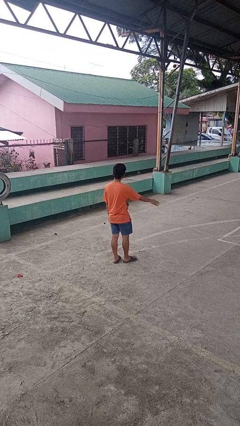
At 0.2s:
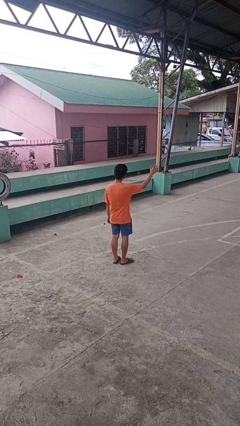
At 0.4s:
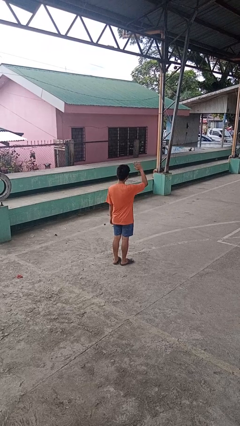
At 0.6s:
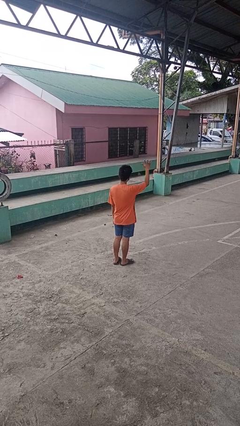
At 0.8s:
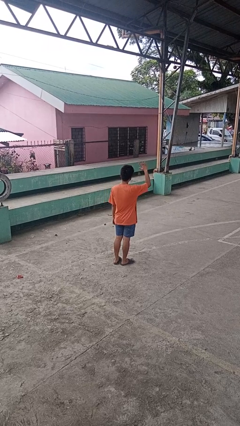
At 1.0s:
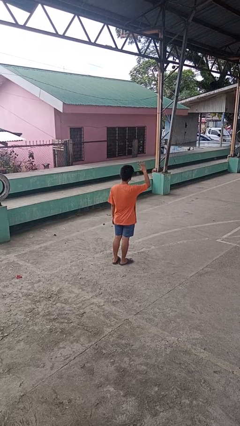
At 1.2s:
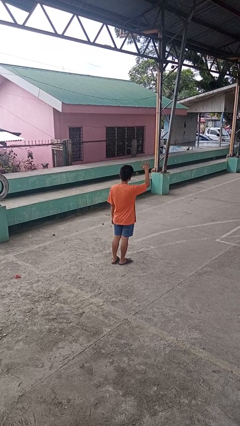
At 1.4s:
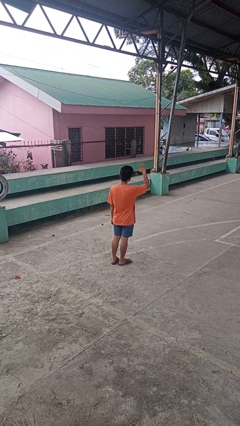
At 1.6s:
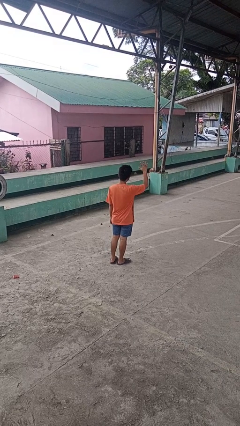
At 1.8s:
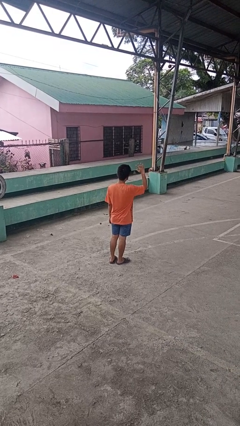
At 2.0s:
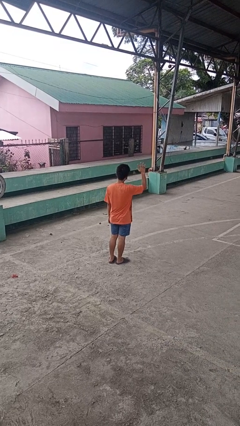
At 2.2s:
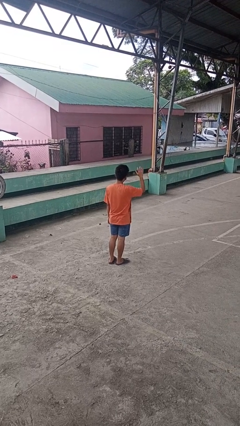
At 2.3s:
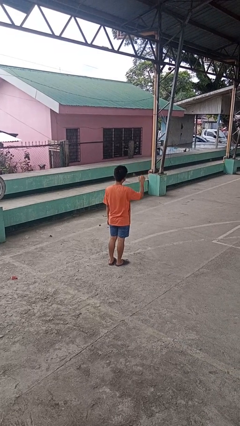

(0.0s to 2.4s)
person waves at person

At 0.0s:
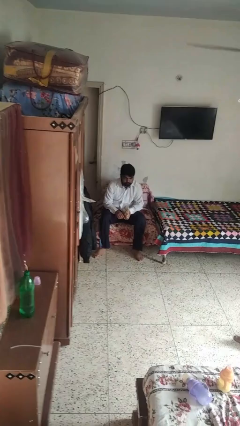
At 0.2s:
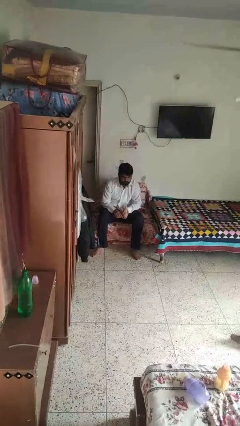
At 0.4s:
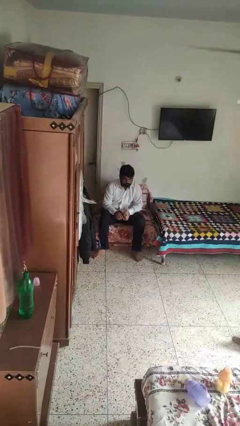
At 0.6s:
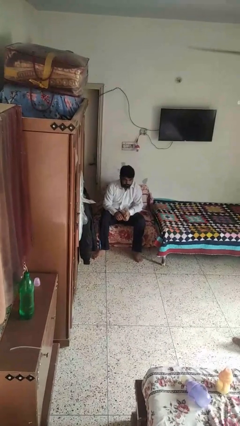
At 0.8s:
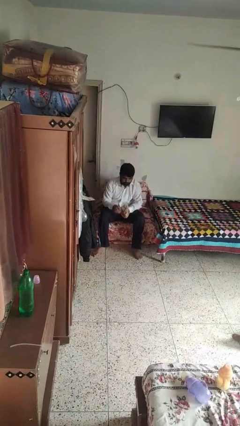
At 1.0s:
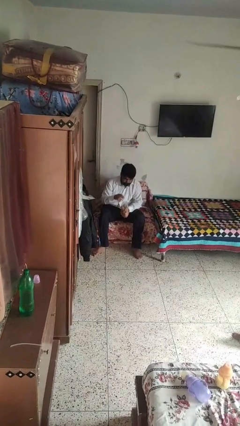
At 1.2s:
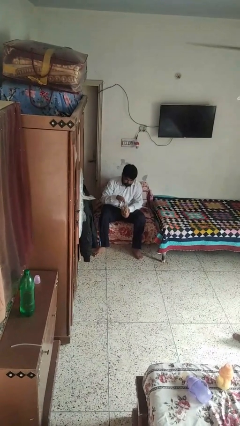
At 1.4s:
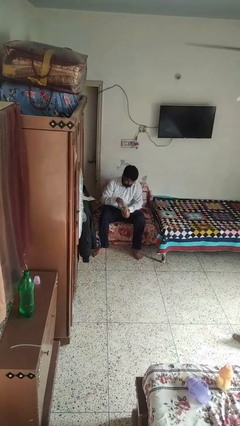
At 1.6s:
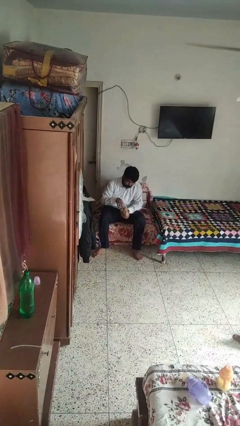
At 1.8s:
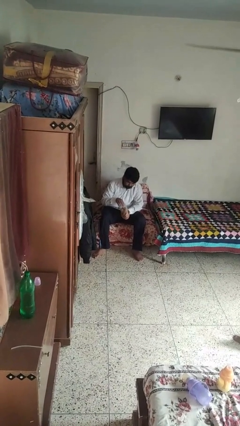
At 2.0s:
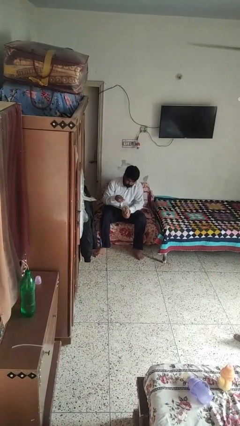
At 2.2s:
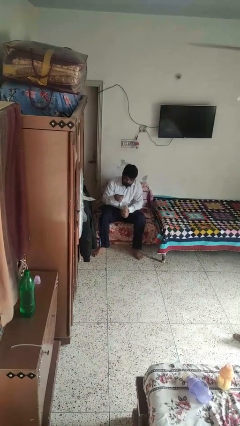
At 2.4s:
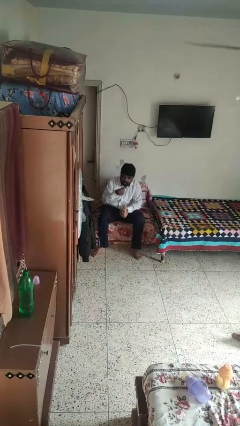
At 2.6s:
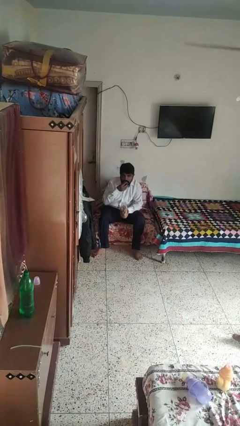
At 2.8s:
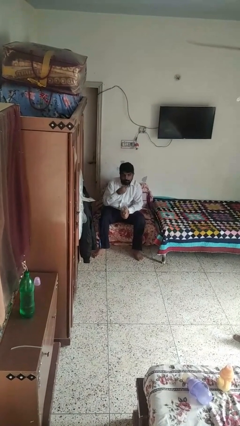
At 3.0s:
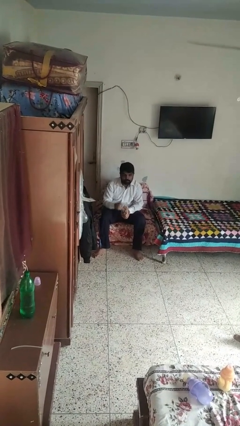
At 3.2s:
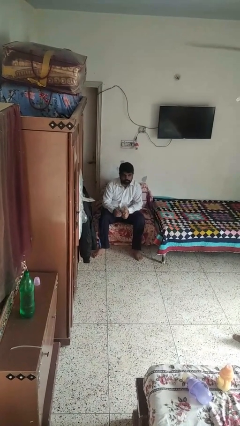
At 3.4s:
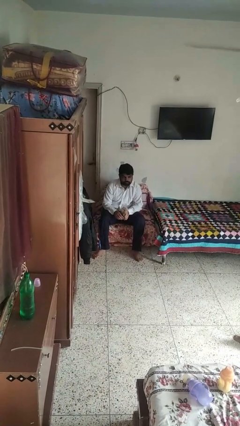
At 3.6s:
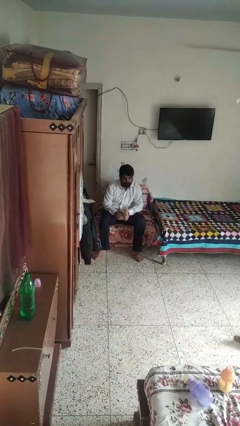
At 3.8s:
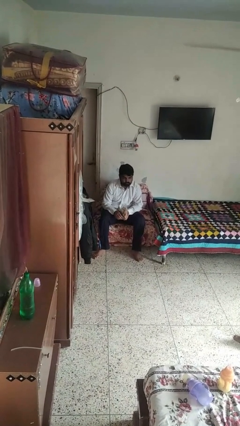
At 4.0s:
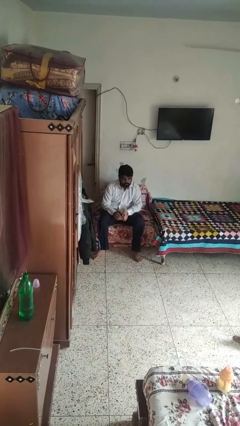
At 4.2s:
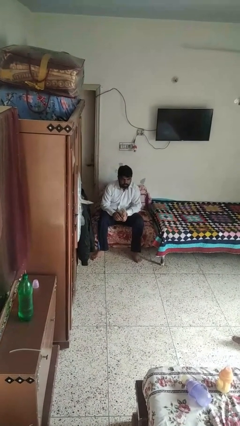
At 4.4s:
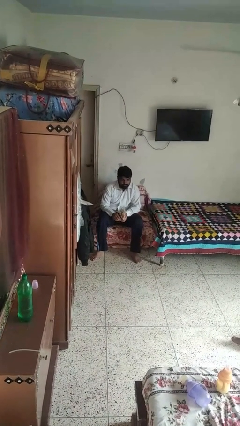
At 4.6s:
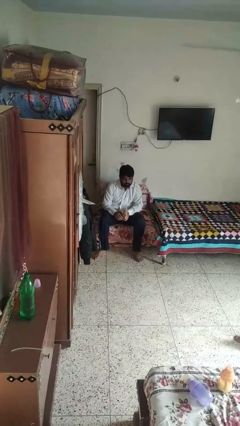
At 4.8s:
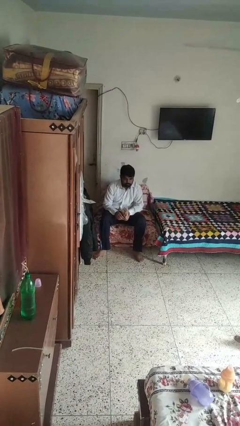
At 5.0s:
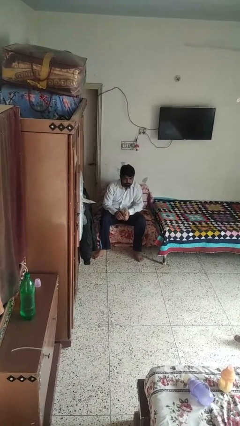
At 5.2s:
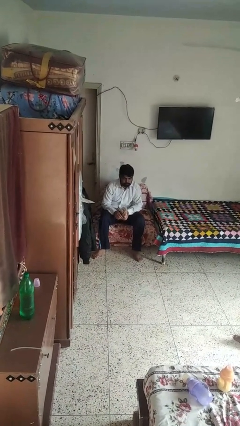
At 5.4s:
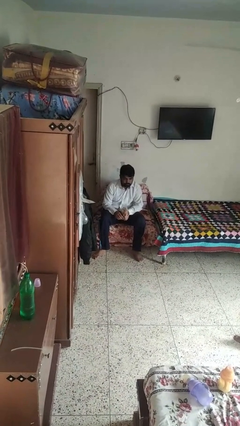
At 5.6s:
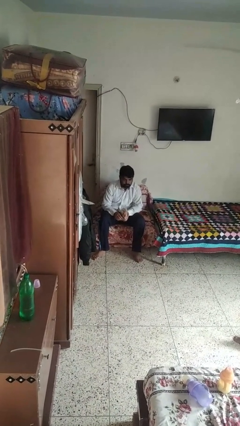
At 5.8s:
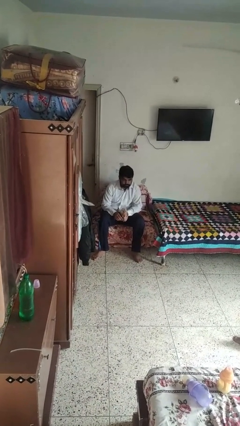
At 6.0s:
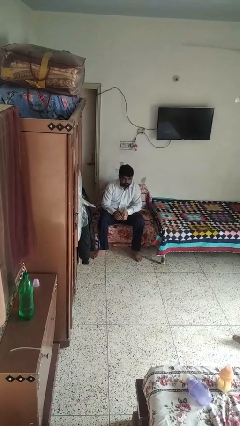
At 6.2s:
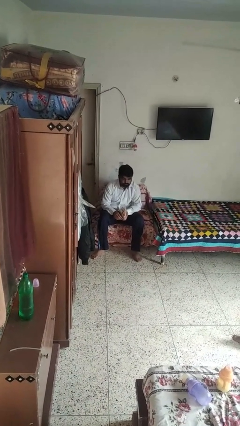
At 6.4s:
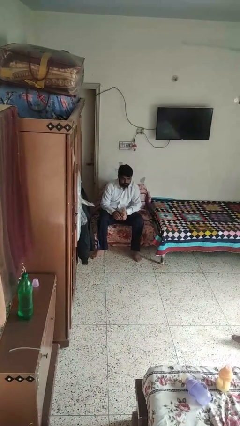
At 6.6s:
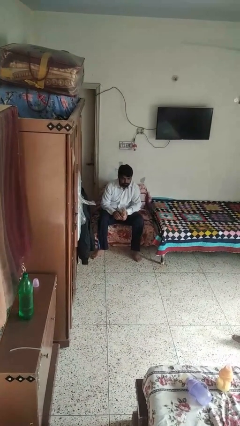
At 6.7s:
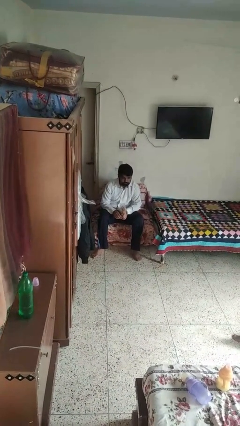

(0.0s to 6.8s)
person eats snack from bag

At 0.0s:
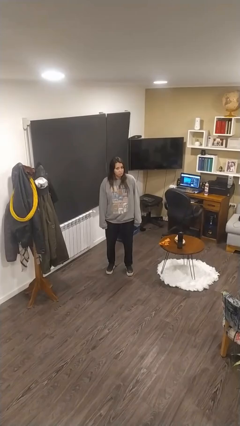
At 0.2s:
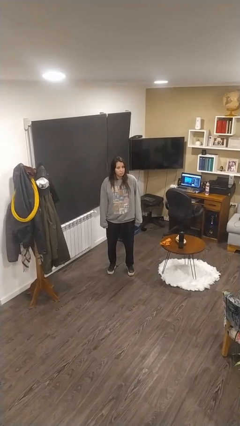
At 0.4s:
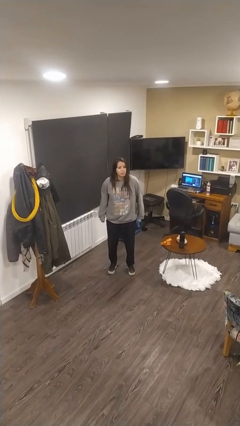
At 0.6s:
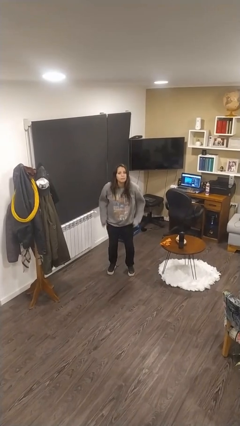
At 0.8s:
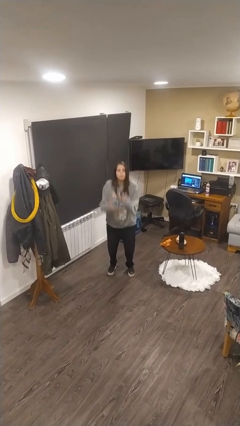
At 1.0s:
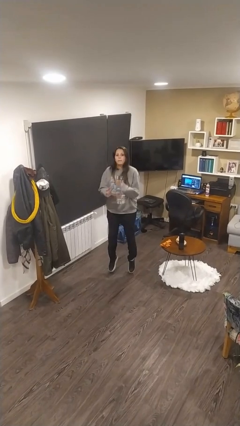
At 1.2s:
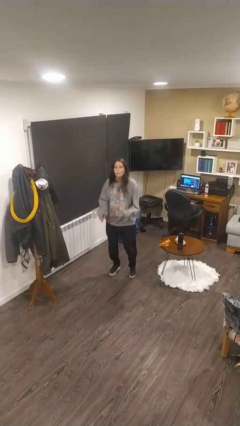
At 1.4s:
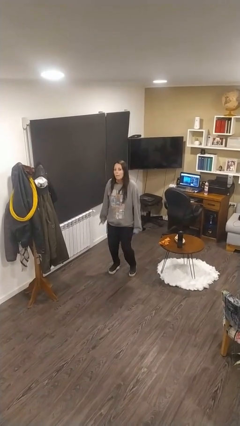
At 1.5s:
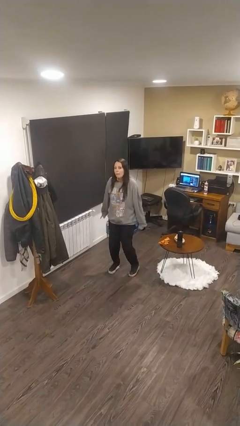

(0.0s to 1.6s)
person jumps

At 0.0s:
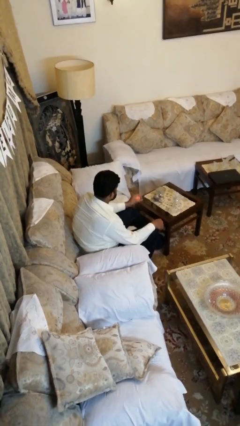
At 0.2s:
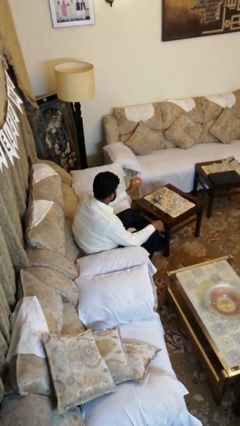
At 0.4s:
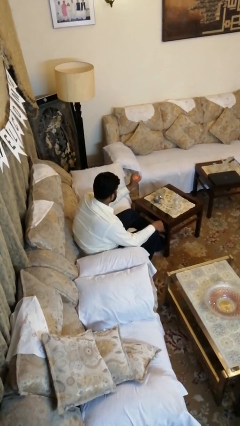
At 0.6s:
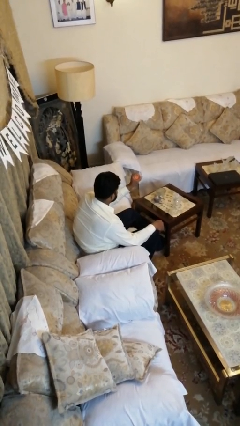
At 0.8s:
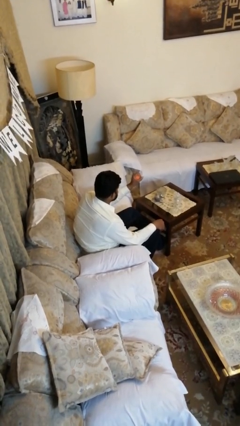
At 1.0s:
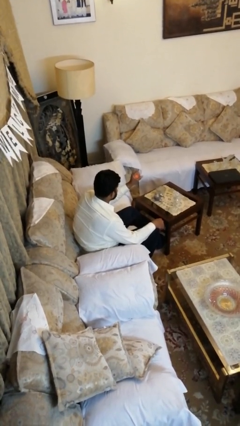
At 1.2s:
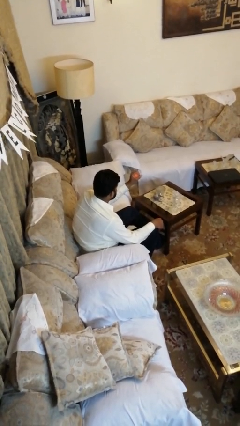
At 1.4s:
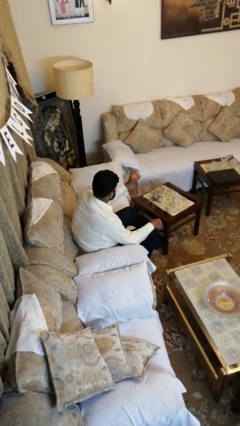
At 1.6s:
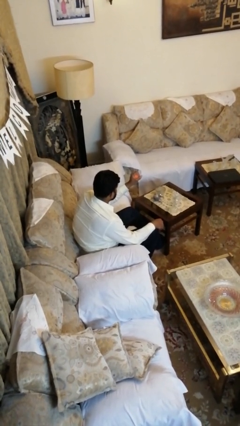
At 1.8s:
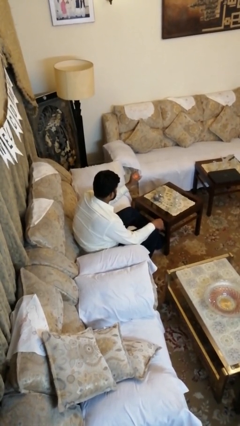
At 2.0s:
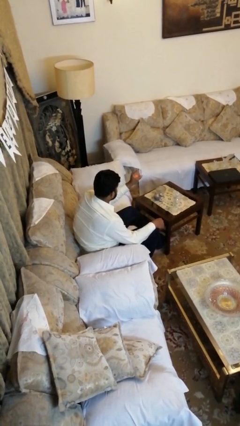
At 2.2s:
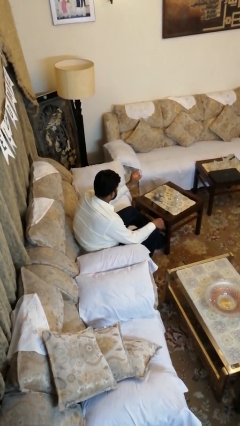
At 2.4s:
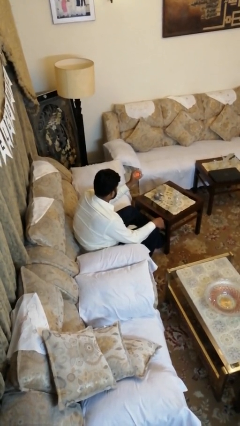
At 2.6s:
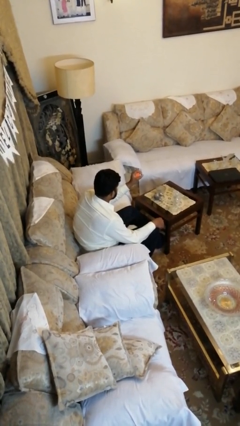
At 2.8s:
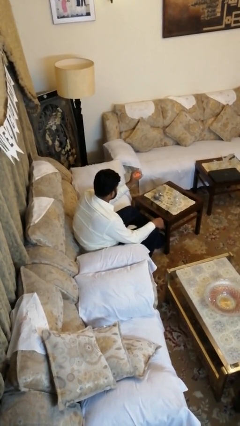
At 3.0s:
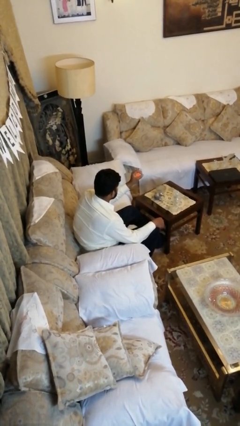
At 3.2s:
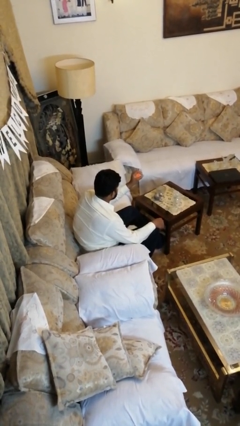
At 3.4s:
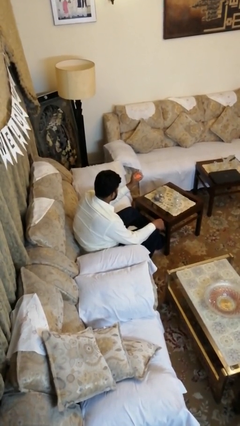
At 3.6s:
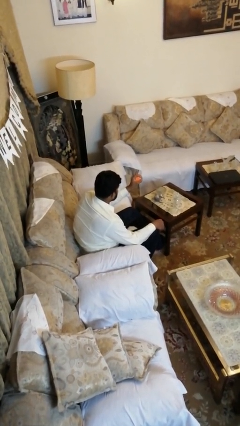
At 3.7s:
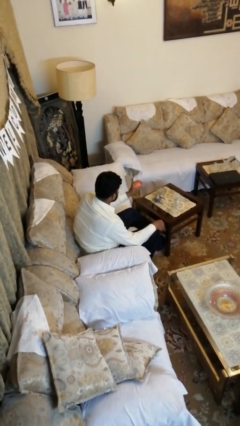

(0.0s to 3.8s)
person squeezes object

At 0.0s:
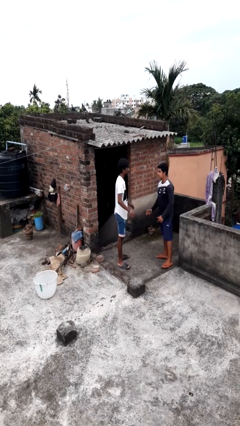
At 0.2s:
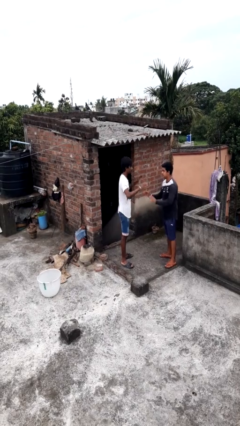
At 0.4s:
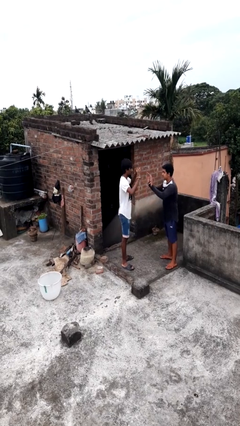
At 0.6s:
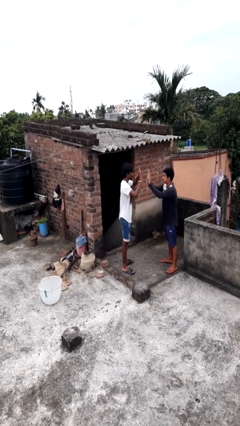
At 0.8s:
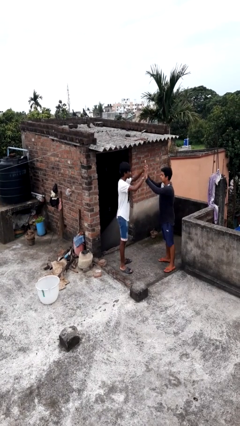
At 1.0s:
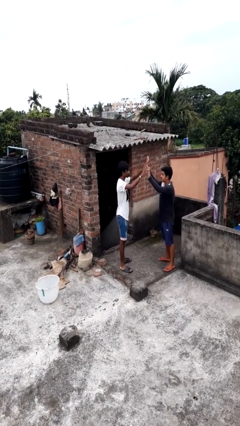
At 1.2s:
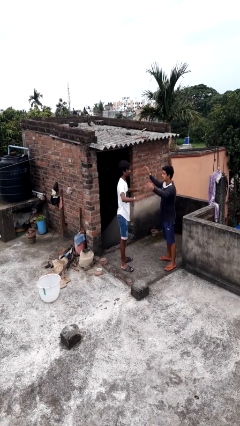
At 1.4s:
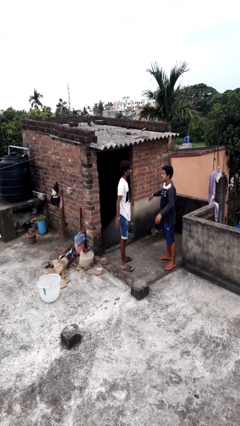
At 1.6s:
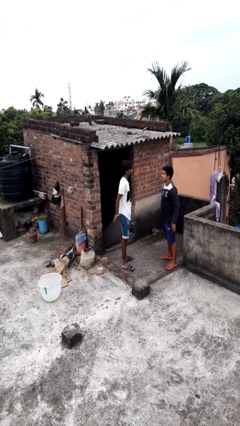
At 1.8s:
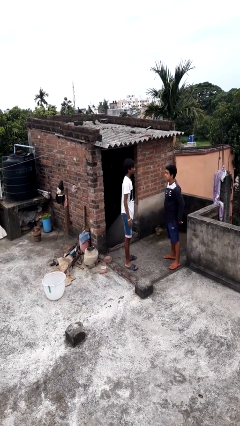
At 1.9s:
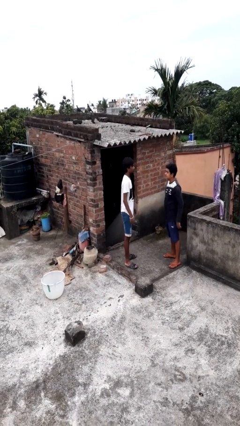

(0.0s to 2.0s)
person highfives hand

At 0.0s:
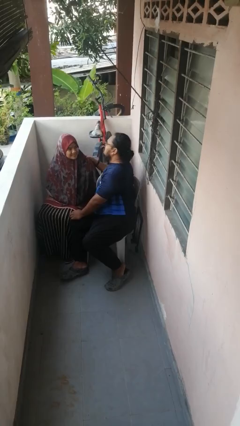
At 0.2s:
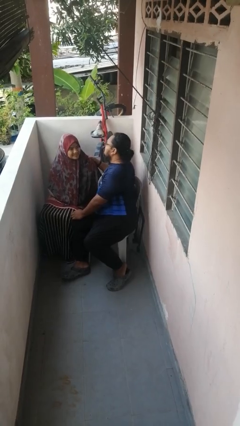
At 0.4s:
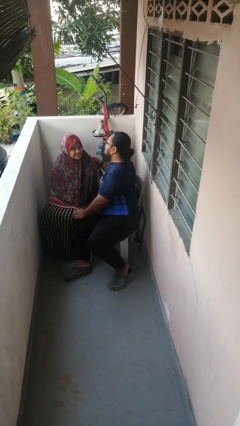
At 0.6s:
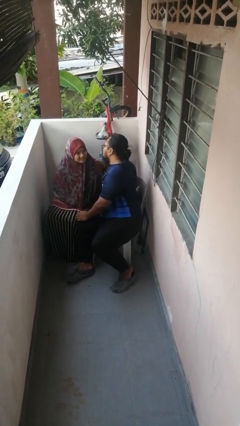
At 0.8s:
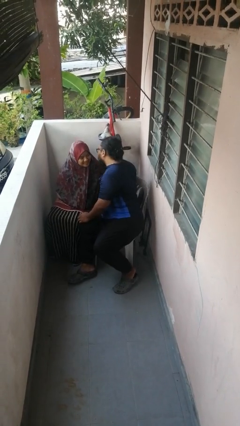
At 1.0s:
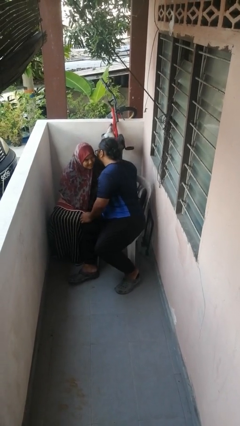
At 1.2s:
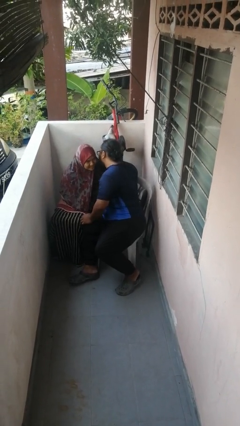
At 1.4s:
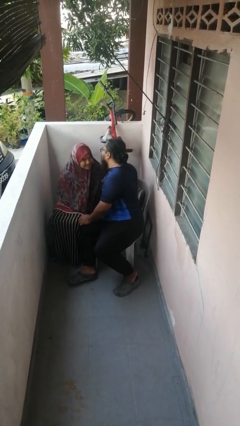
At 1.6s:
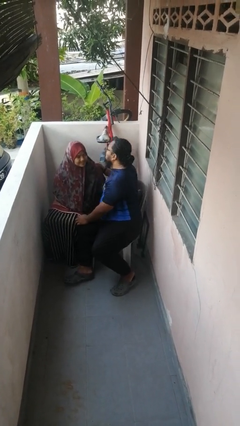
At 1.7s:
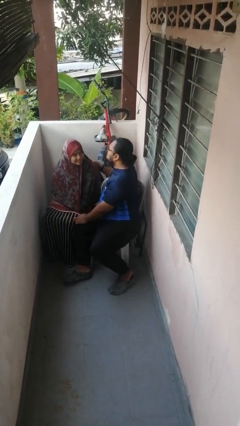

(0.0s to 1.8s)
person kisses cheek of person
